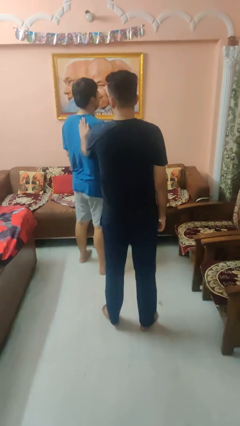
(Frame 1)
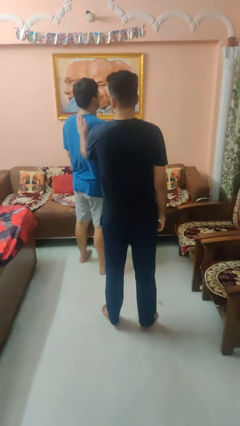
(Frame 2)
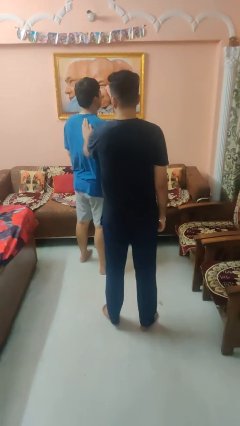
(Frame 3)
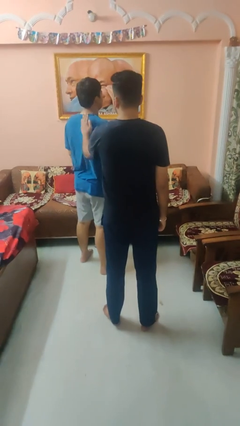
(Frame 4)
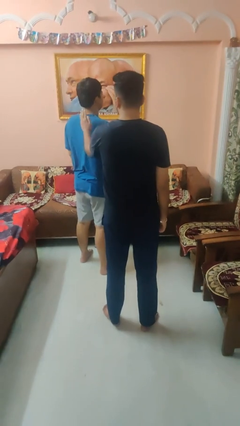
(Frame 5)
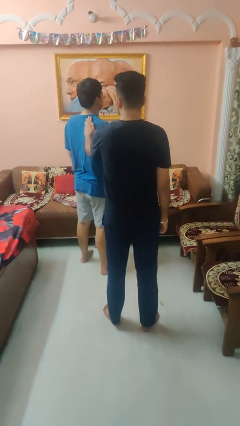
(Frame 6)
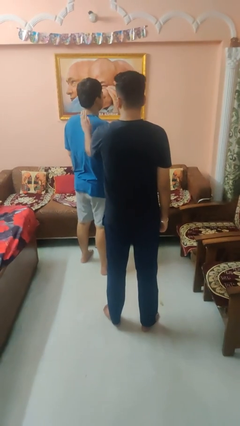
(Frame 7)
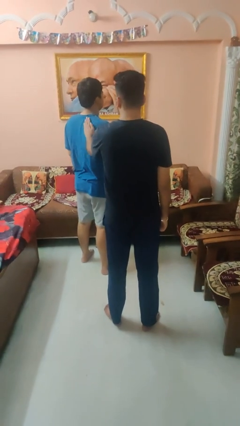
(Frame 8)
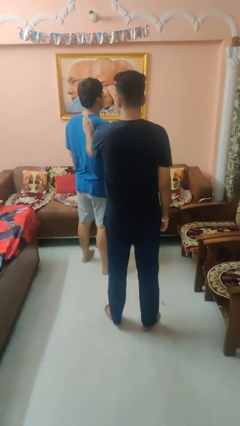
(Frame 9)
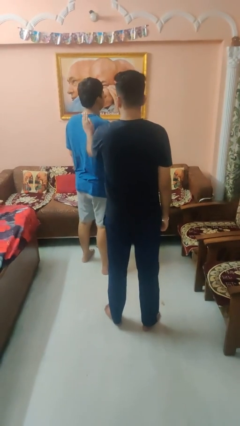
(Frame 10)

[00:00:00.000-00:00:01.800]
person touches back of person

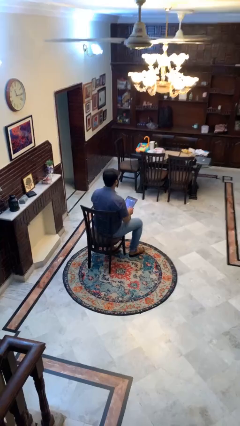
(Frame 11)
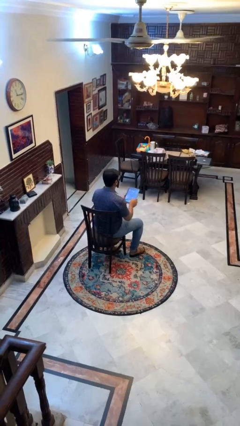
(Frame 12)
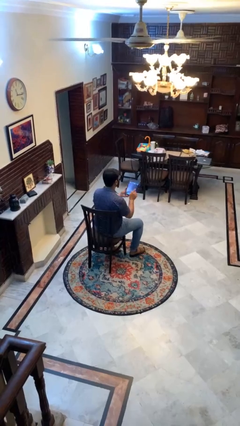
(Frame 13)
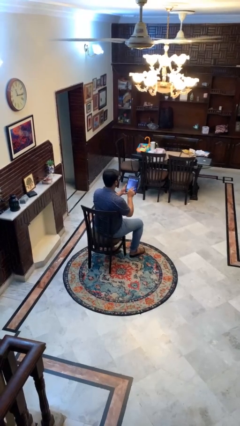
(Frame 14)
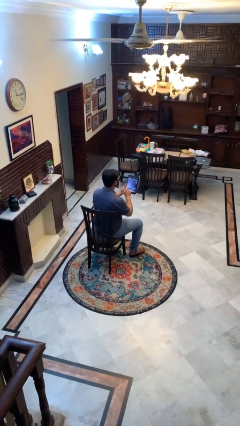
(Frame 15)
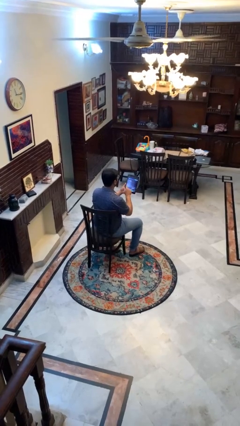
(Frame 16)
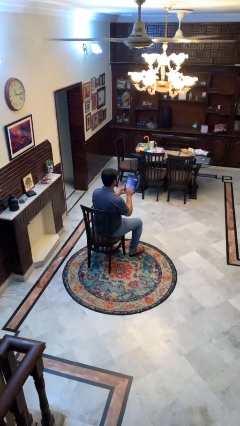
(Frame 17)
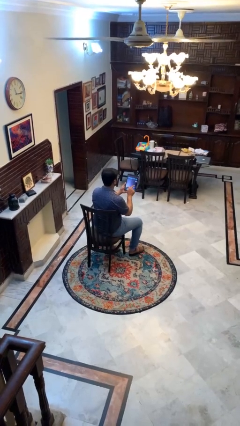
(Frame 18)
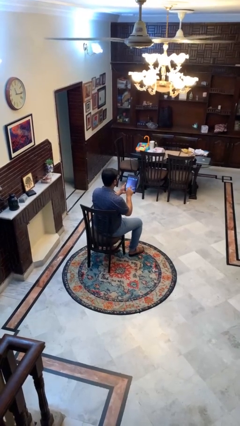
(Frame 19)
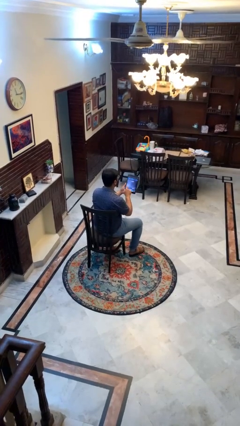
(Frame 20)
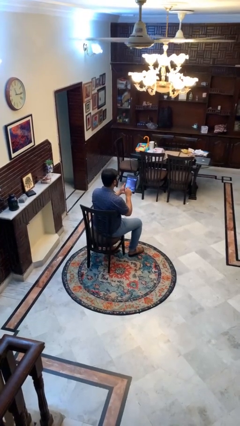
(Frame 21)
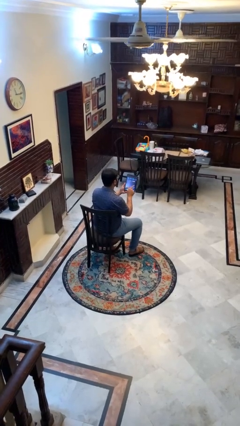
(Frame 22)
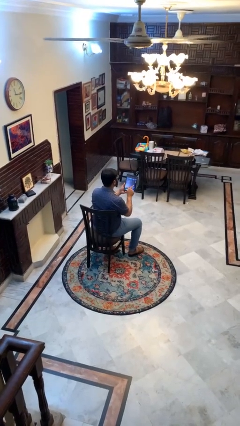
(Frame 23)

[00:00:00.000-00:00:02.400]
person interacts with tablet

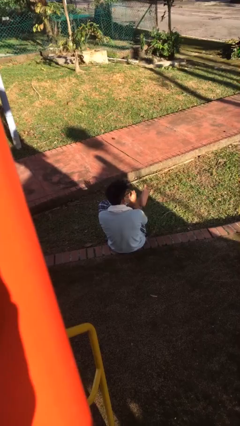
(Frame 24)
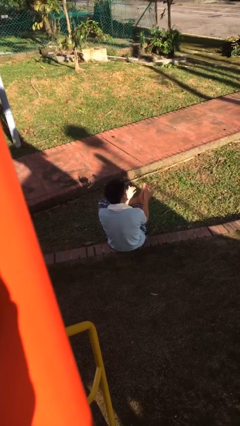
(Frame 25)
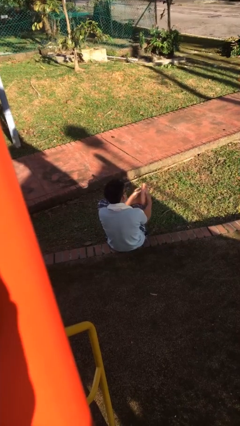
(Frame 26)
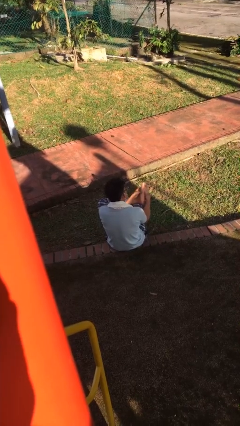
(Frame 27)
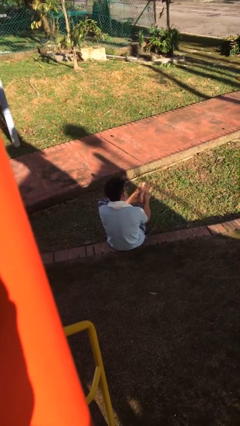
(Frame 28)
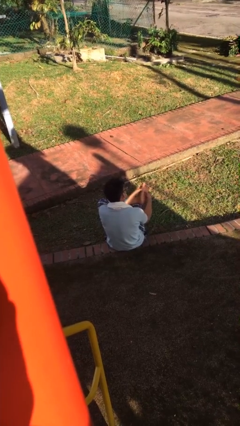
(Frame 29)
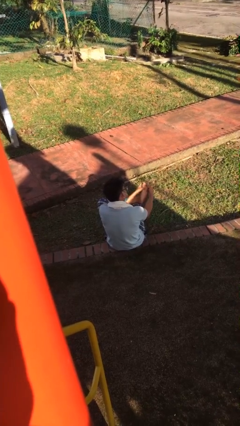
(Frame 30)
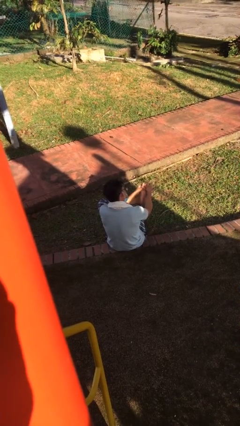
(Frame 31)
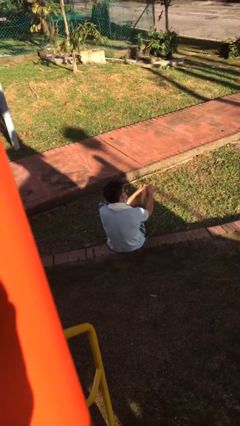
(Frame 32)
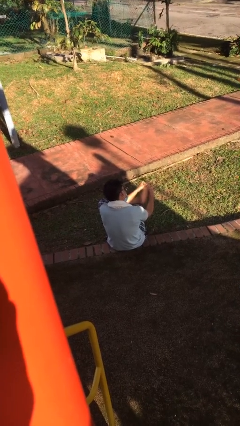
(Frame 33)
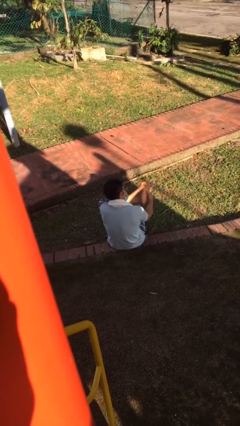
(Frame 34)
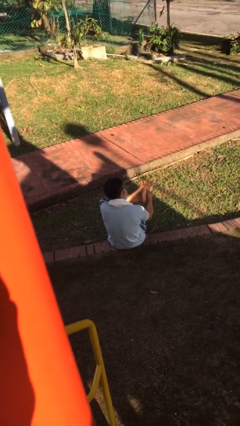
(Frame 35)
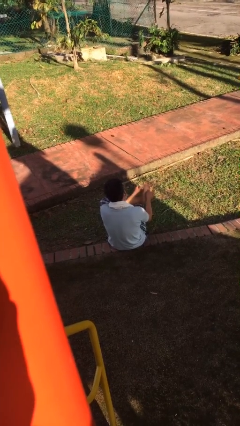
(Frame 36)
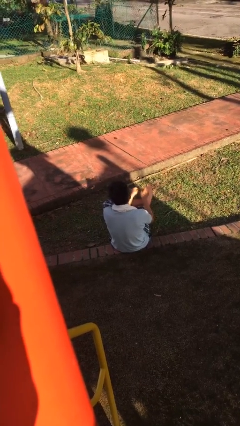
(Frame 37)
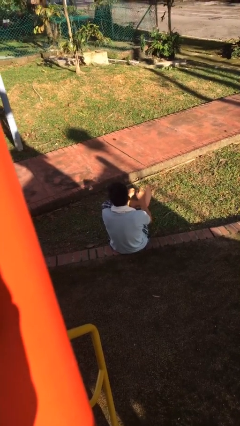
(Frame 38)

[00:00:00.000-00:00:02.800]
person rubs foot

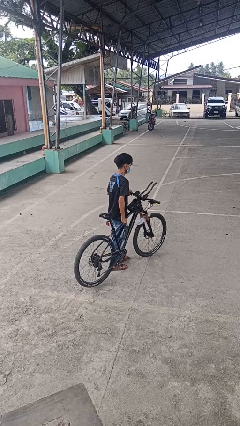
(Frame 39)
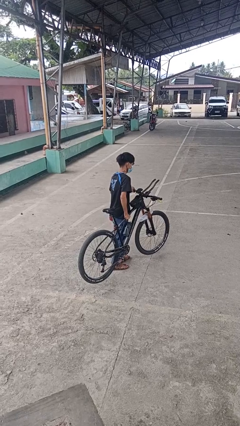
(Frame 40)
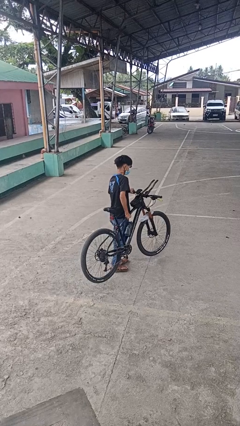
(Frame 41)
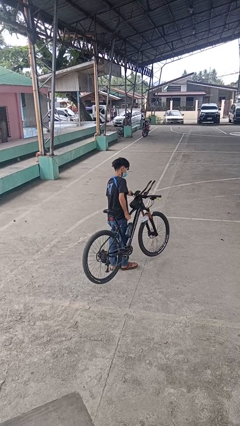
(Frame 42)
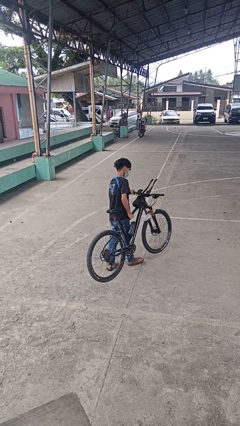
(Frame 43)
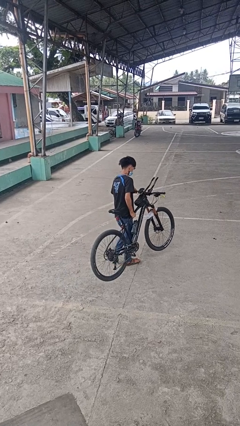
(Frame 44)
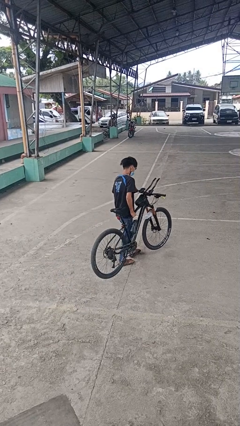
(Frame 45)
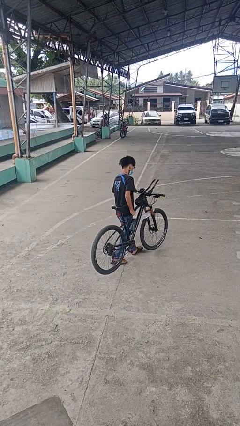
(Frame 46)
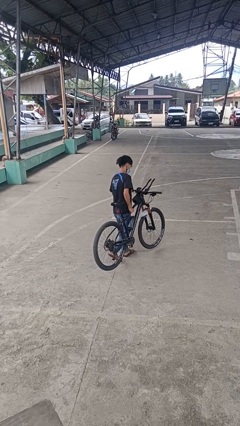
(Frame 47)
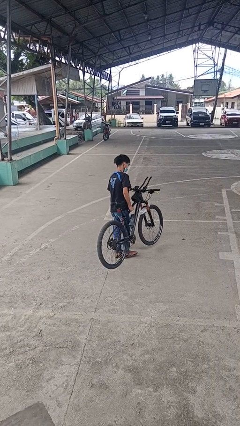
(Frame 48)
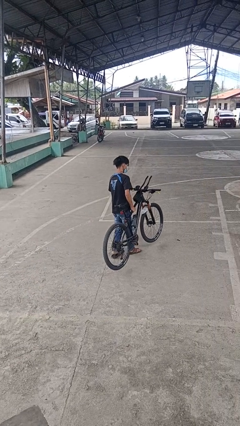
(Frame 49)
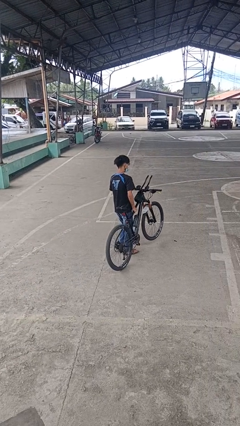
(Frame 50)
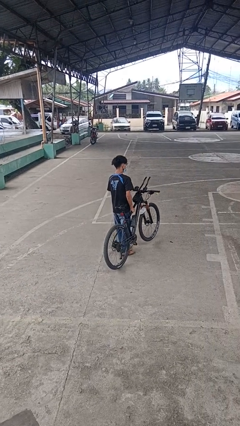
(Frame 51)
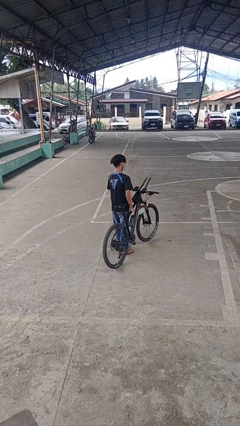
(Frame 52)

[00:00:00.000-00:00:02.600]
person carries bicycle

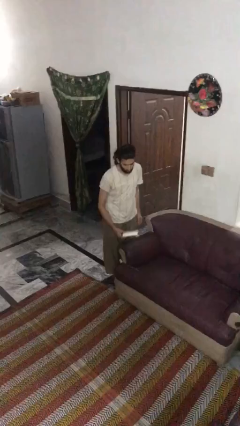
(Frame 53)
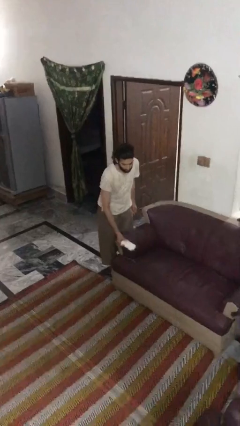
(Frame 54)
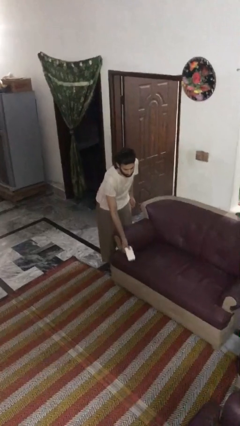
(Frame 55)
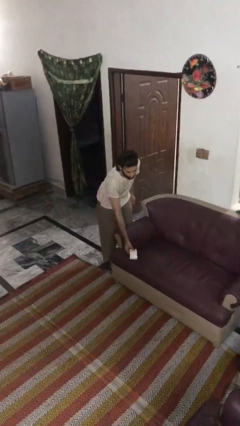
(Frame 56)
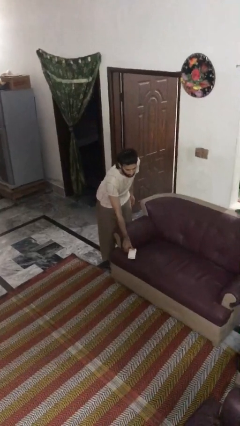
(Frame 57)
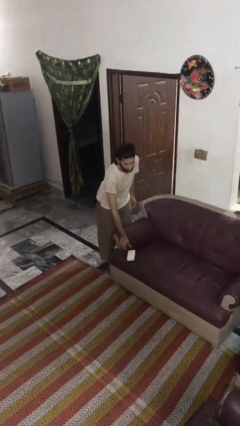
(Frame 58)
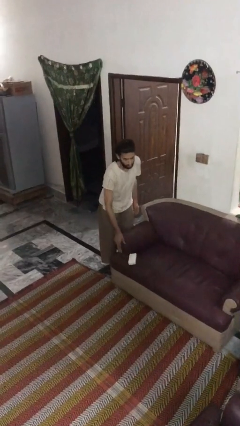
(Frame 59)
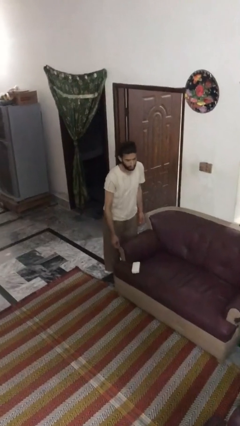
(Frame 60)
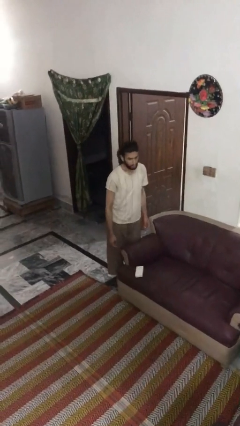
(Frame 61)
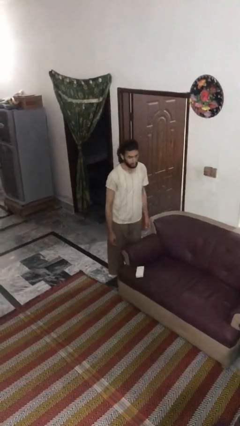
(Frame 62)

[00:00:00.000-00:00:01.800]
person puts down object on couch

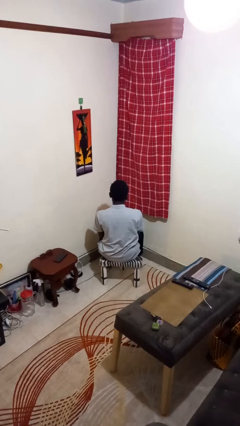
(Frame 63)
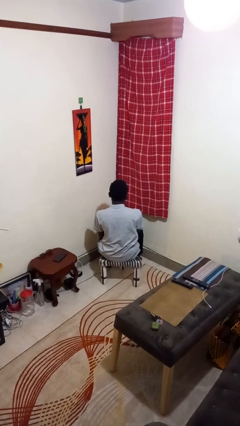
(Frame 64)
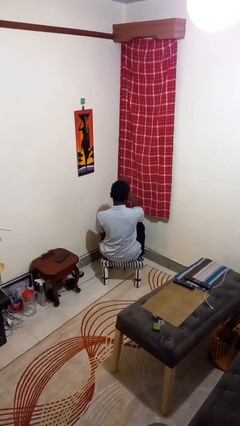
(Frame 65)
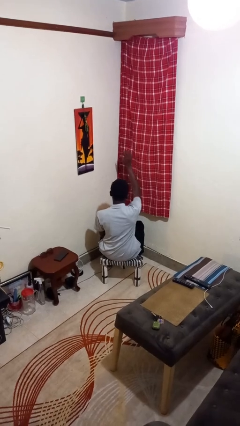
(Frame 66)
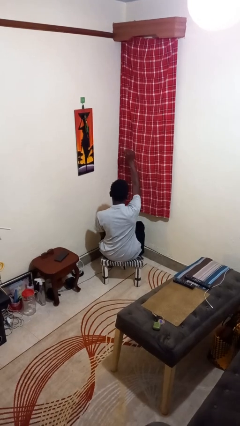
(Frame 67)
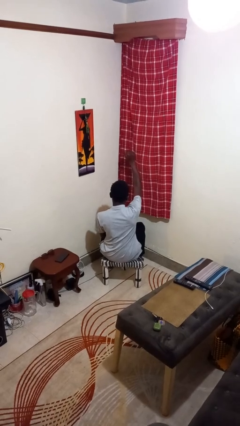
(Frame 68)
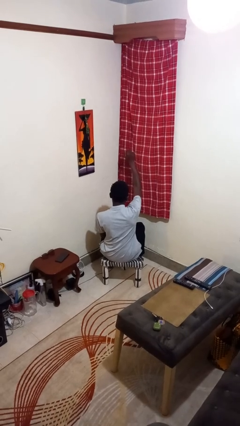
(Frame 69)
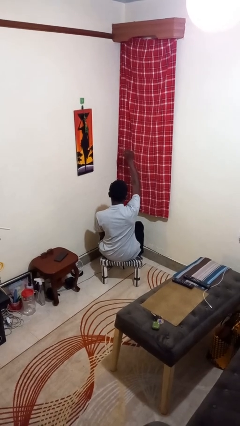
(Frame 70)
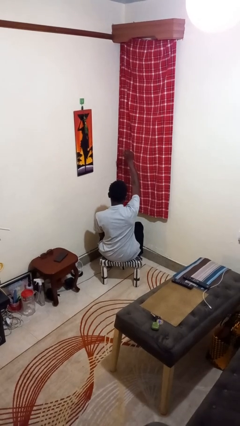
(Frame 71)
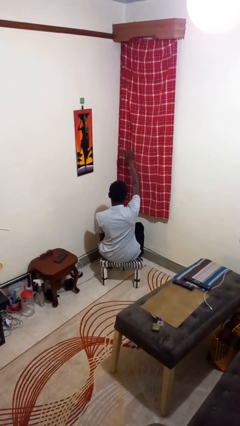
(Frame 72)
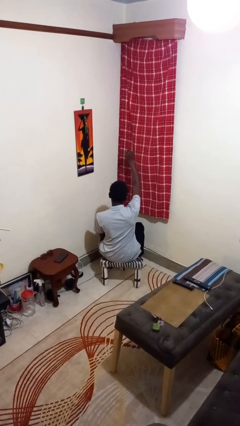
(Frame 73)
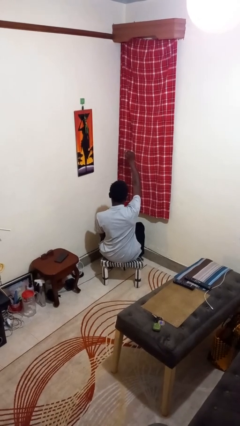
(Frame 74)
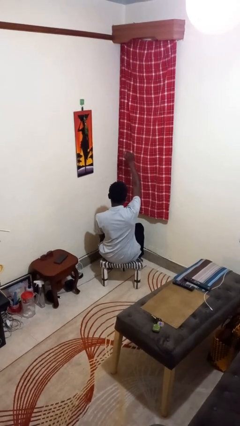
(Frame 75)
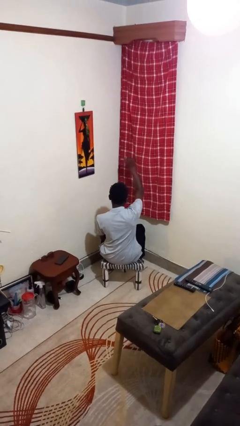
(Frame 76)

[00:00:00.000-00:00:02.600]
person gestures come here

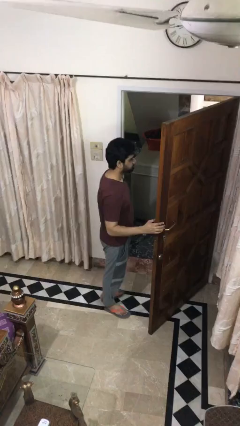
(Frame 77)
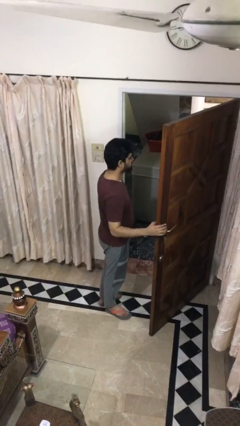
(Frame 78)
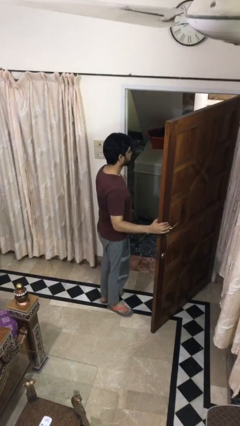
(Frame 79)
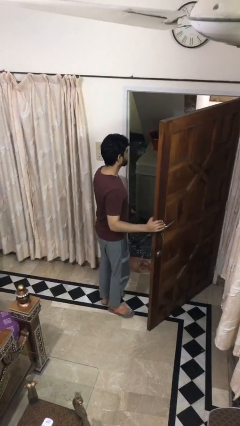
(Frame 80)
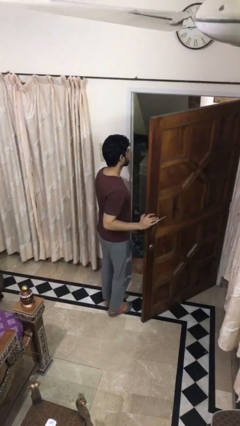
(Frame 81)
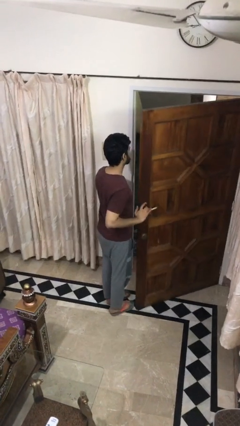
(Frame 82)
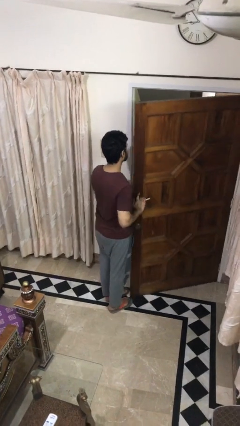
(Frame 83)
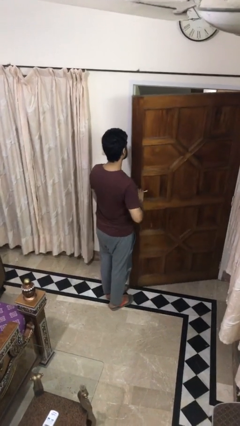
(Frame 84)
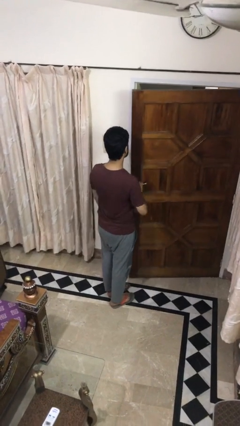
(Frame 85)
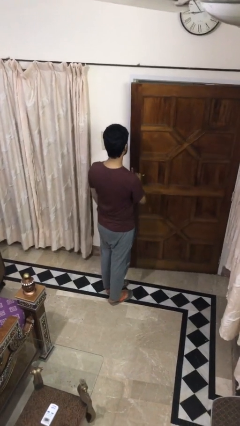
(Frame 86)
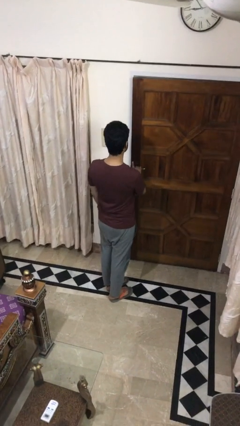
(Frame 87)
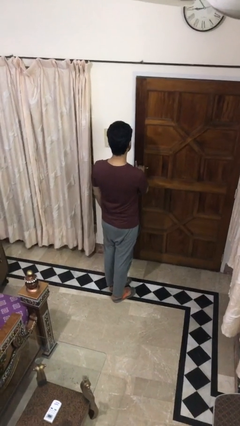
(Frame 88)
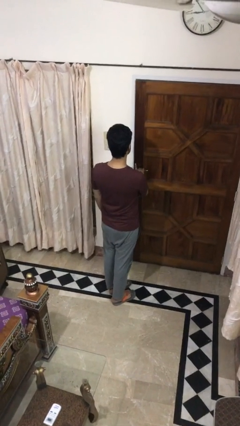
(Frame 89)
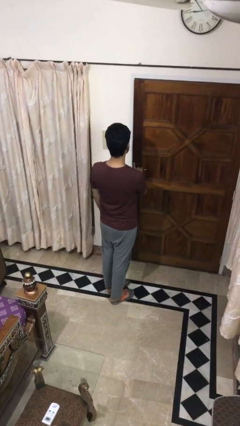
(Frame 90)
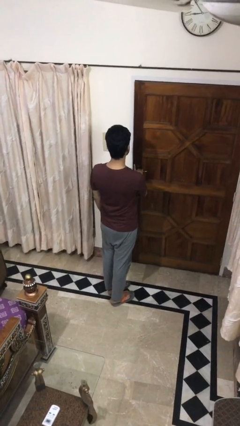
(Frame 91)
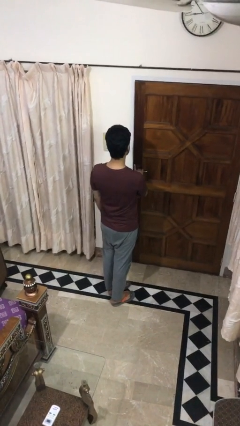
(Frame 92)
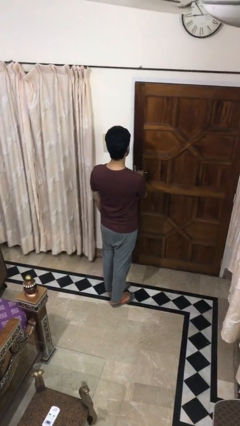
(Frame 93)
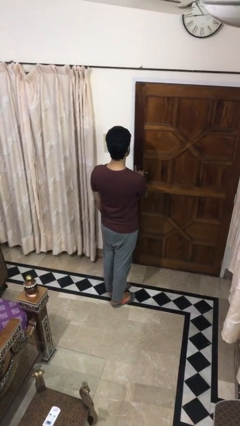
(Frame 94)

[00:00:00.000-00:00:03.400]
person closes facility door
